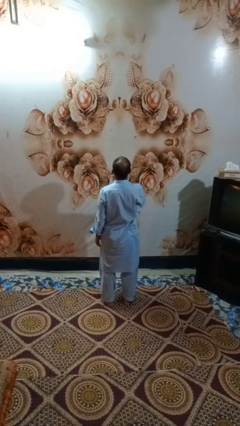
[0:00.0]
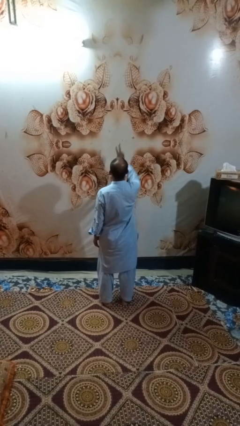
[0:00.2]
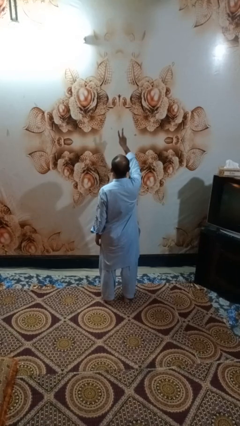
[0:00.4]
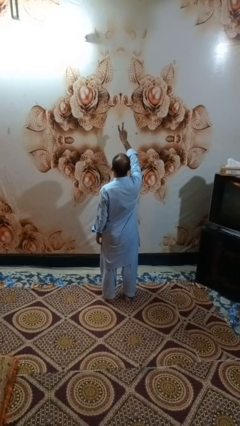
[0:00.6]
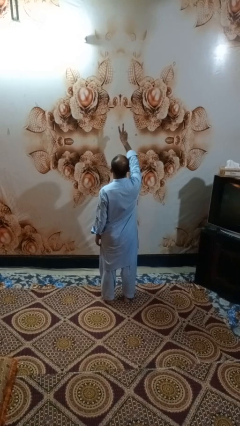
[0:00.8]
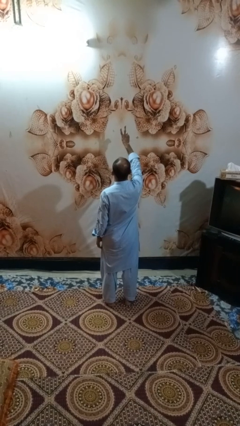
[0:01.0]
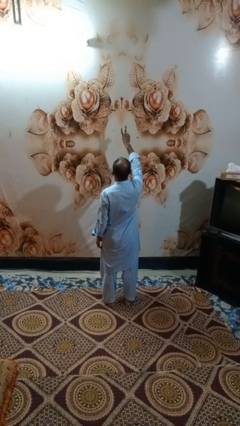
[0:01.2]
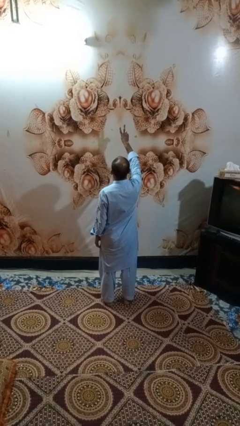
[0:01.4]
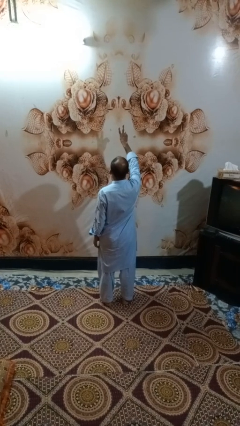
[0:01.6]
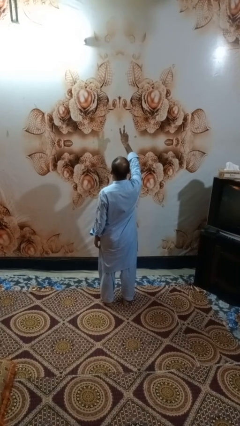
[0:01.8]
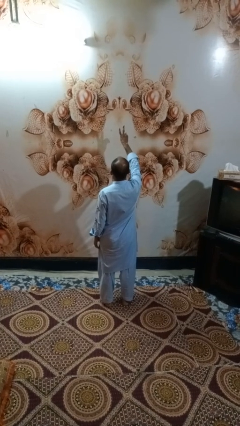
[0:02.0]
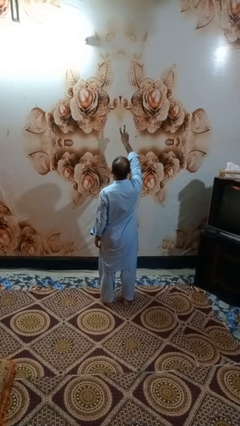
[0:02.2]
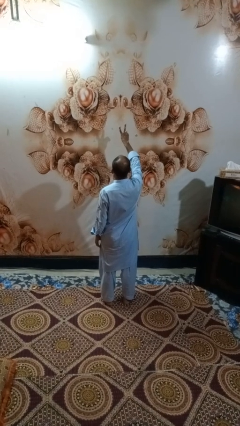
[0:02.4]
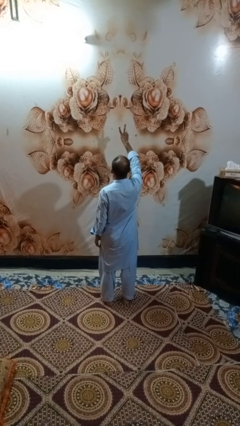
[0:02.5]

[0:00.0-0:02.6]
person gestures peace

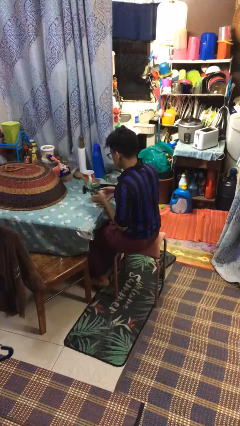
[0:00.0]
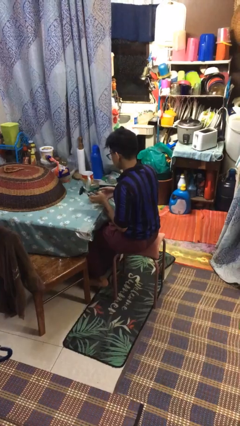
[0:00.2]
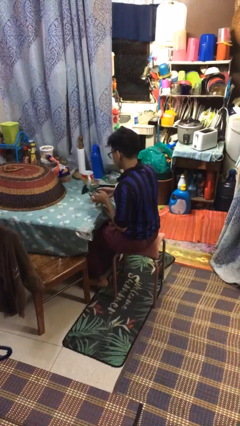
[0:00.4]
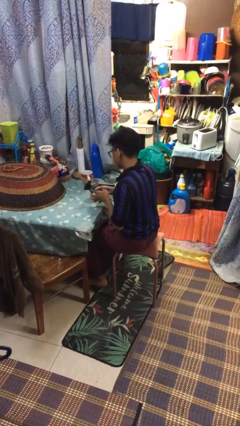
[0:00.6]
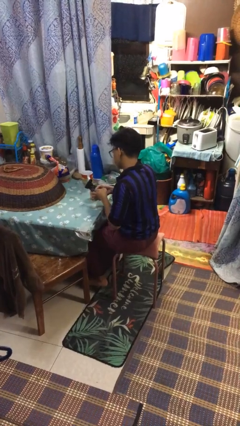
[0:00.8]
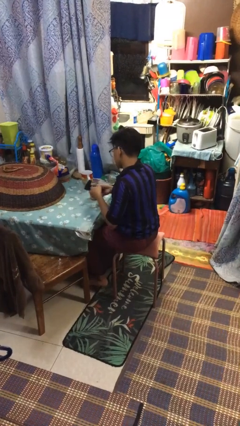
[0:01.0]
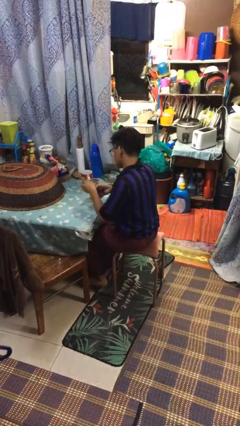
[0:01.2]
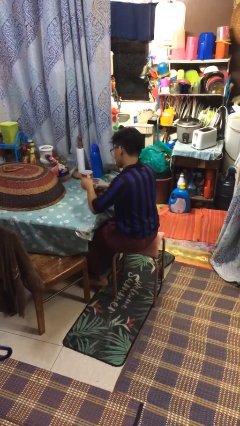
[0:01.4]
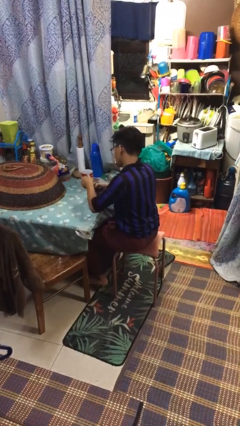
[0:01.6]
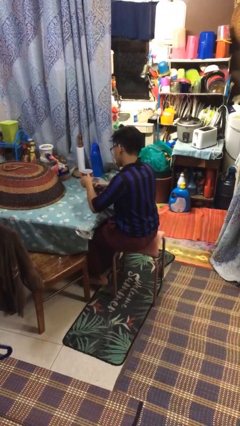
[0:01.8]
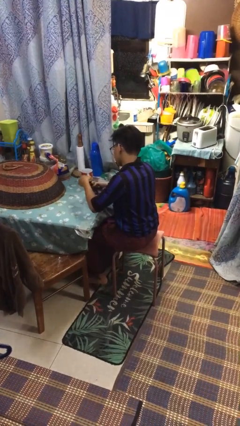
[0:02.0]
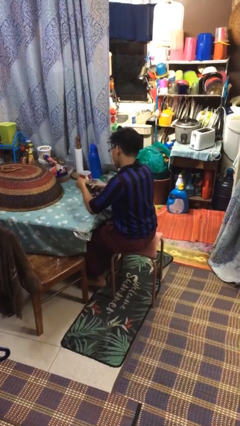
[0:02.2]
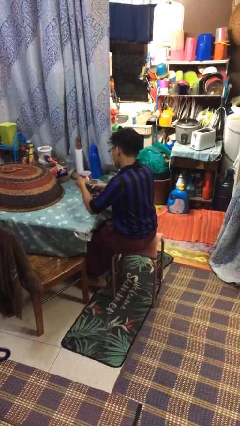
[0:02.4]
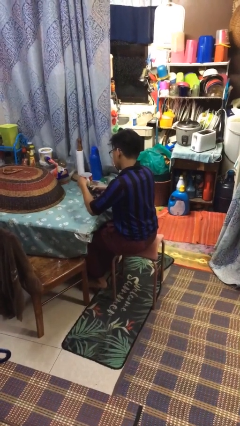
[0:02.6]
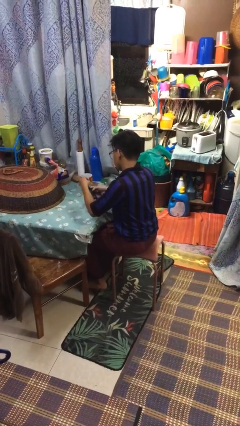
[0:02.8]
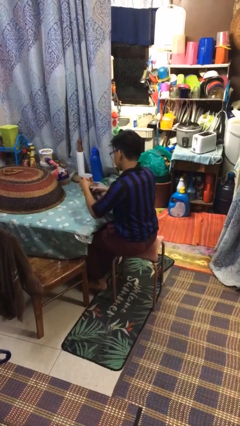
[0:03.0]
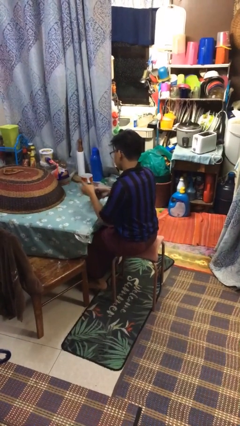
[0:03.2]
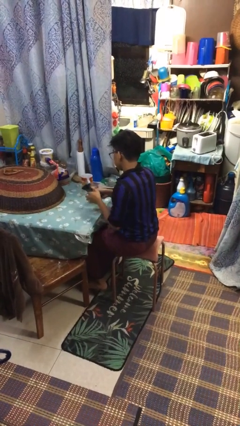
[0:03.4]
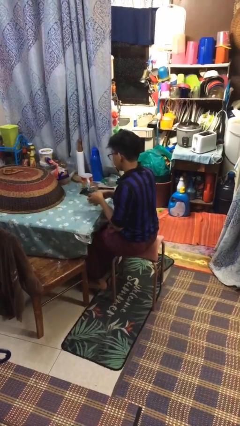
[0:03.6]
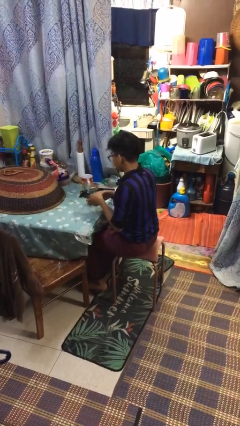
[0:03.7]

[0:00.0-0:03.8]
person opens can with can opener

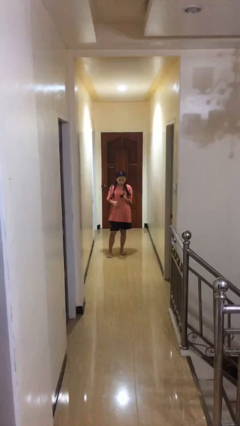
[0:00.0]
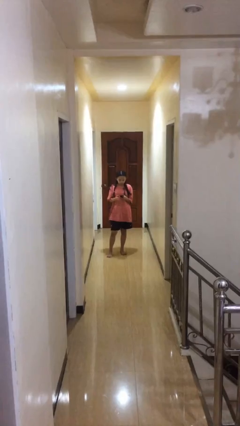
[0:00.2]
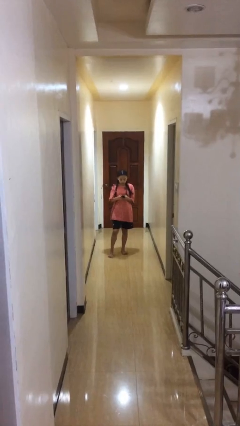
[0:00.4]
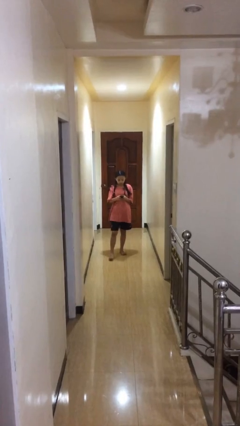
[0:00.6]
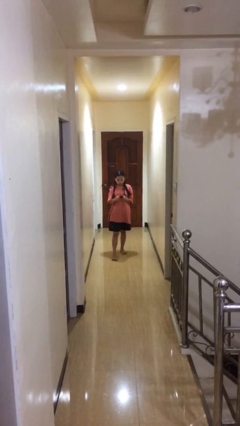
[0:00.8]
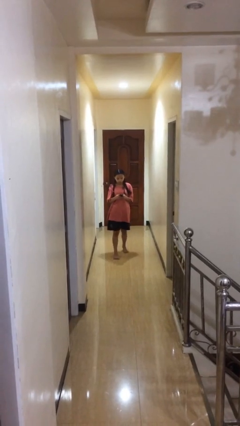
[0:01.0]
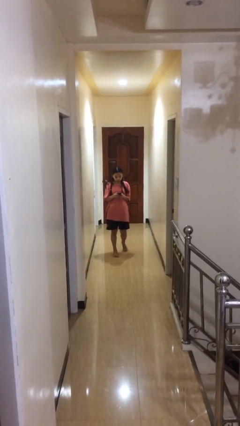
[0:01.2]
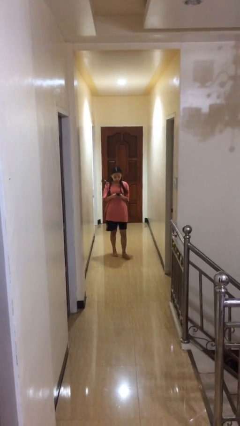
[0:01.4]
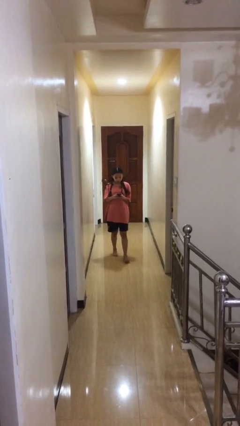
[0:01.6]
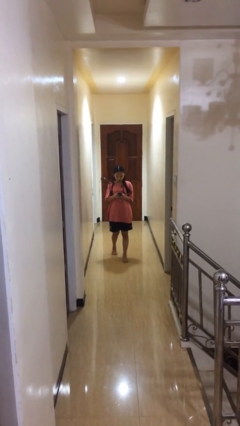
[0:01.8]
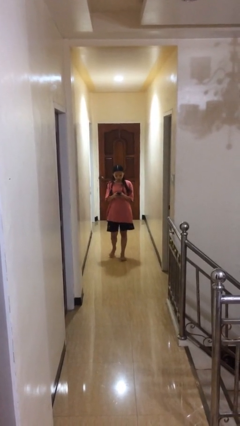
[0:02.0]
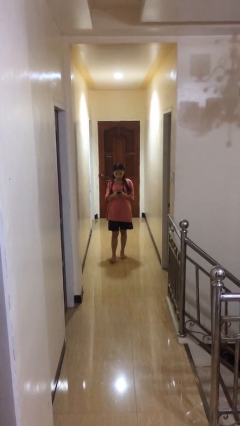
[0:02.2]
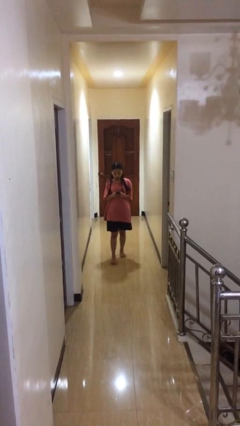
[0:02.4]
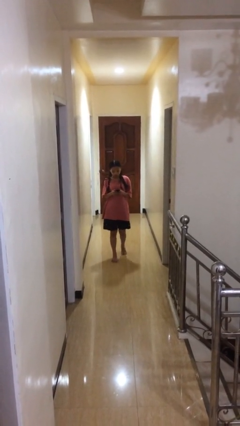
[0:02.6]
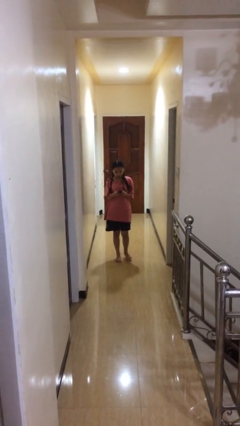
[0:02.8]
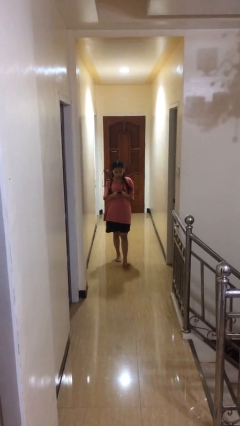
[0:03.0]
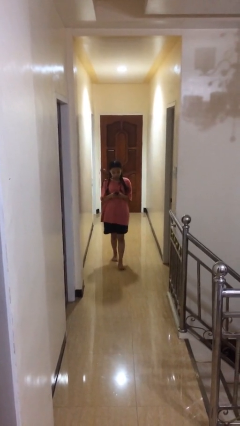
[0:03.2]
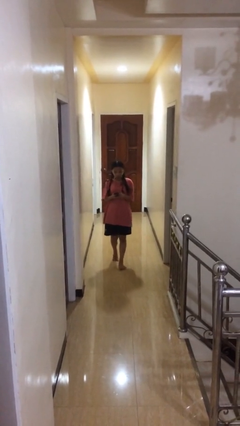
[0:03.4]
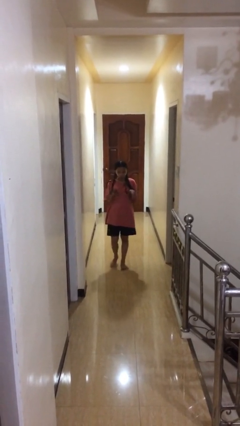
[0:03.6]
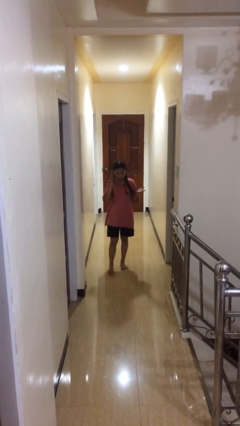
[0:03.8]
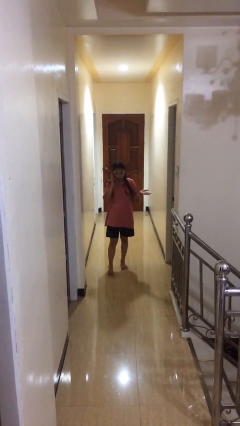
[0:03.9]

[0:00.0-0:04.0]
person texts on phone

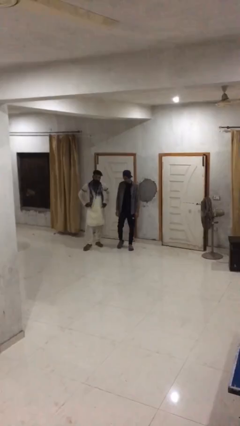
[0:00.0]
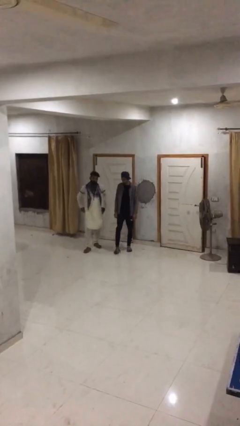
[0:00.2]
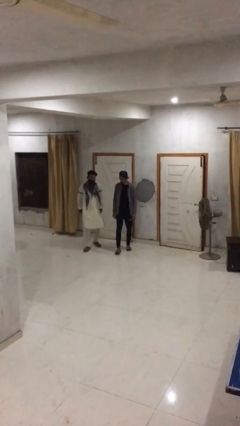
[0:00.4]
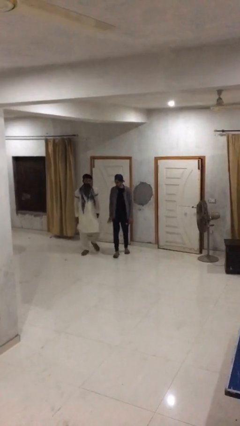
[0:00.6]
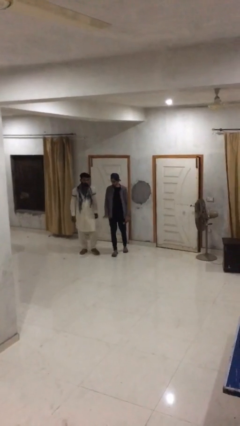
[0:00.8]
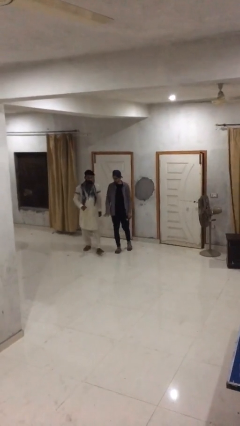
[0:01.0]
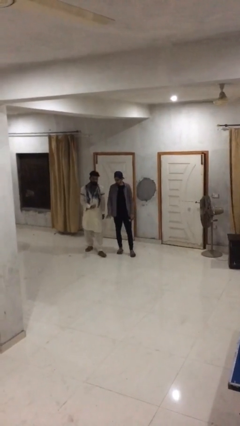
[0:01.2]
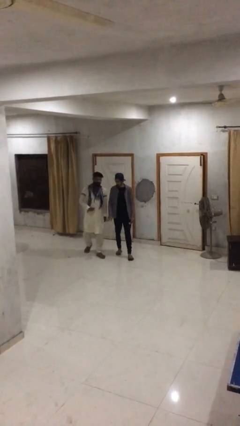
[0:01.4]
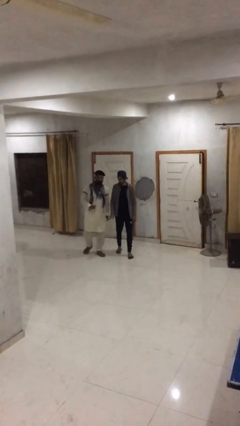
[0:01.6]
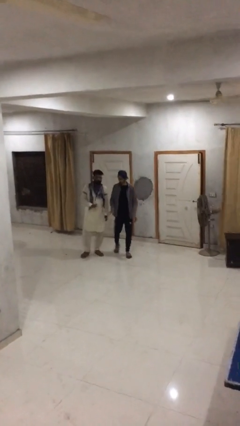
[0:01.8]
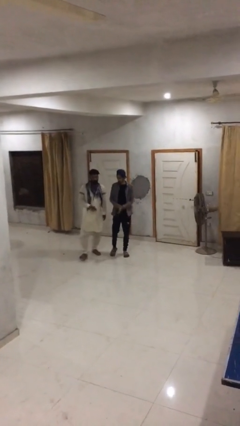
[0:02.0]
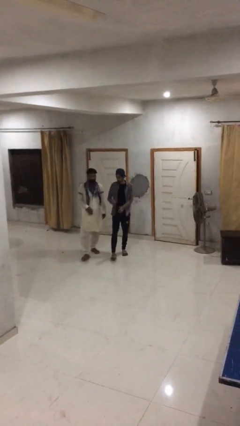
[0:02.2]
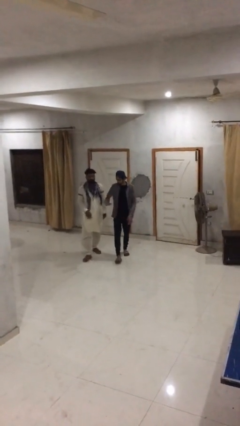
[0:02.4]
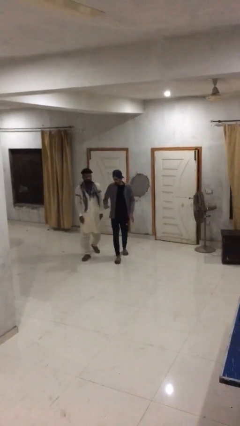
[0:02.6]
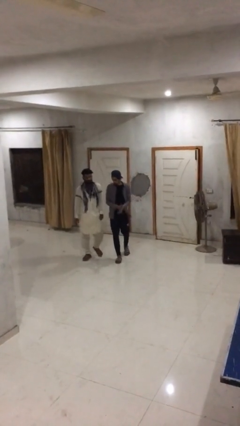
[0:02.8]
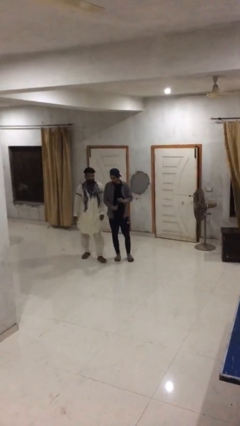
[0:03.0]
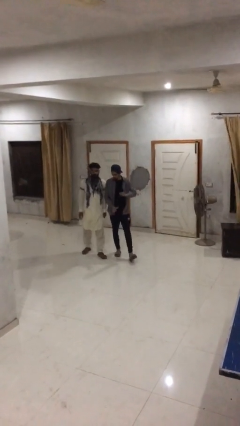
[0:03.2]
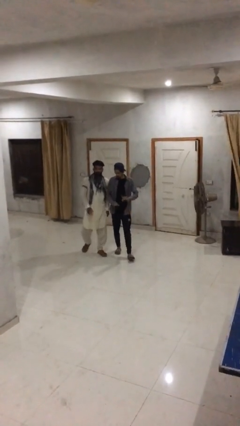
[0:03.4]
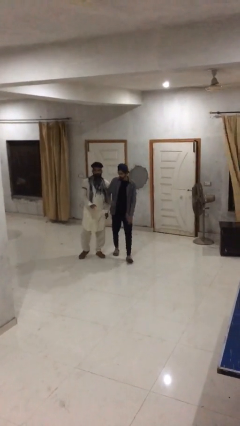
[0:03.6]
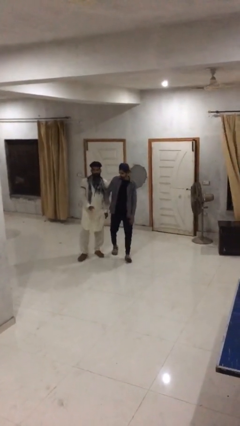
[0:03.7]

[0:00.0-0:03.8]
person talks to person

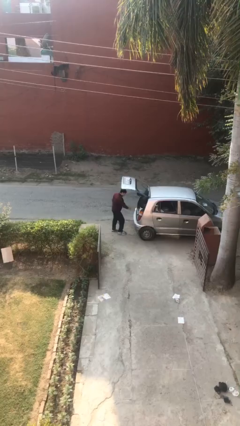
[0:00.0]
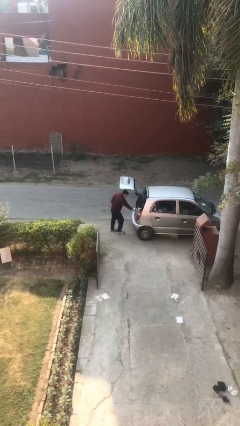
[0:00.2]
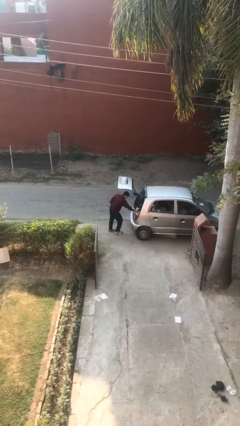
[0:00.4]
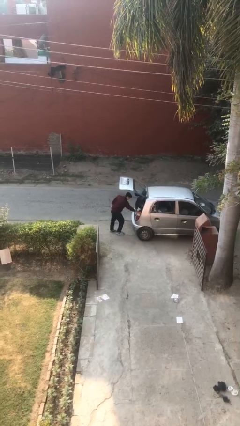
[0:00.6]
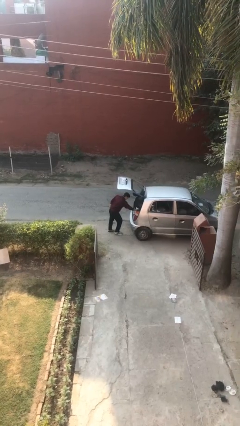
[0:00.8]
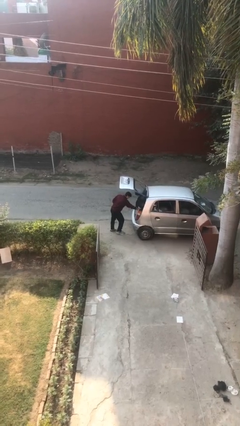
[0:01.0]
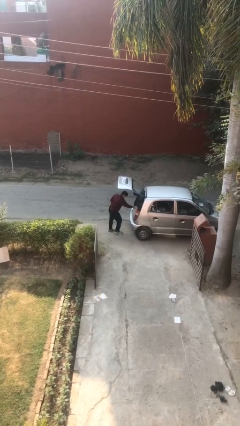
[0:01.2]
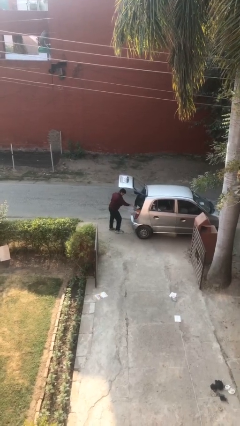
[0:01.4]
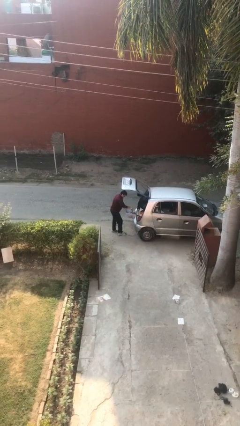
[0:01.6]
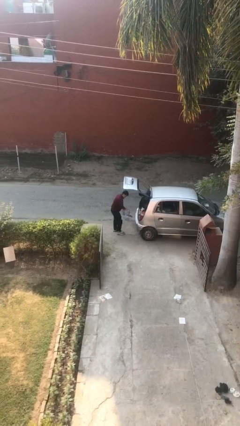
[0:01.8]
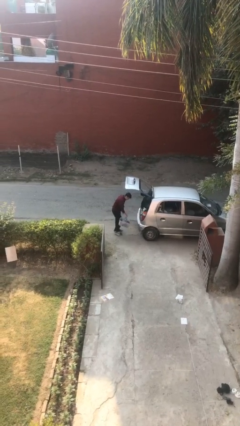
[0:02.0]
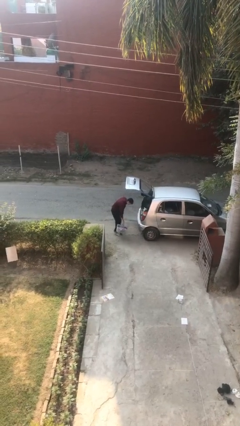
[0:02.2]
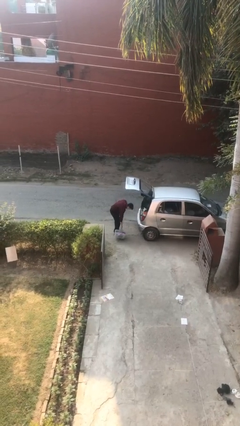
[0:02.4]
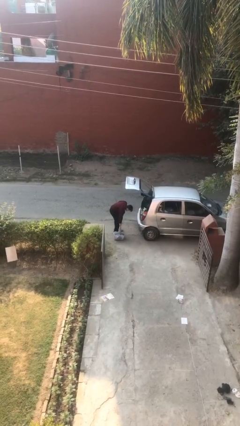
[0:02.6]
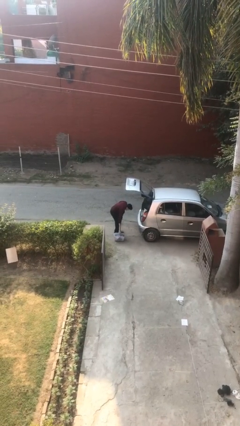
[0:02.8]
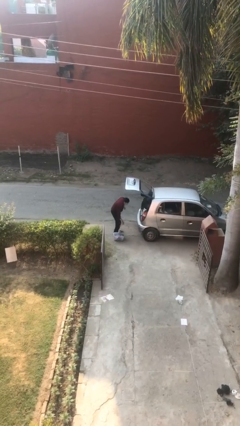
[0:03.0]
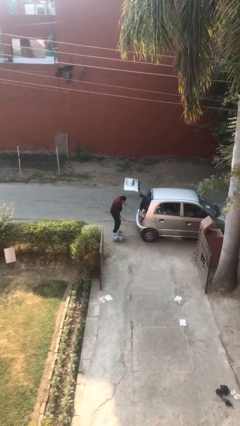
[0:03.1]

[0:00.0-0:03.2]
person unloads car

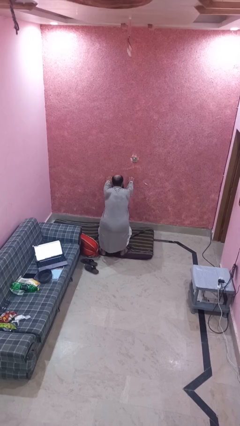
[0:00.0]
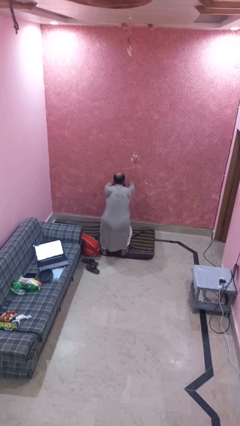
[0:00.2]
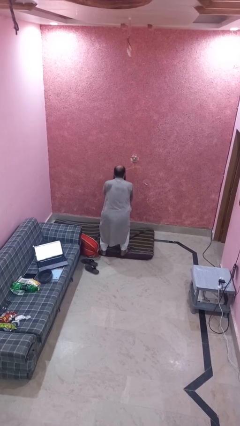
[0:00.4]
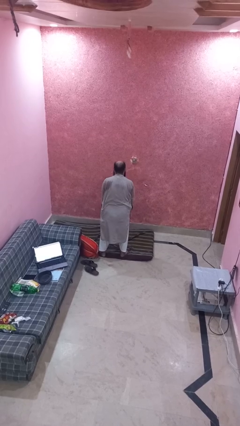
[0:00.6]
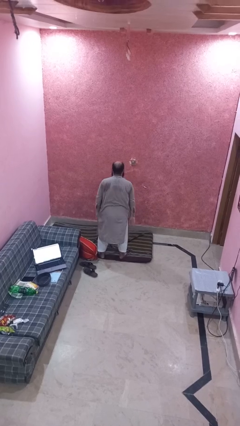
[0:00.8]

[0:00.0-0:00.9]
person stands up
